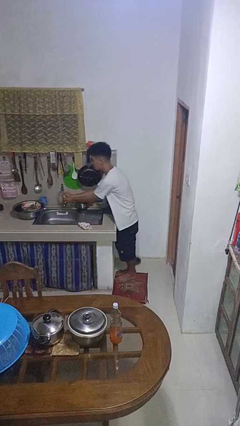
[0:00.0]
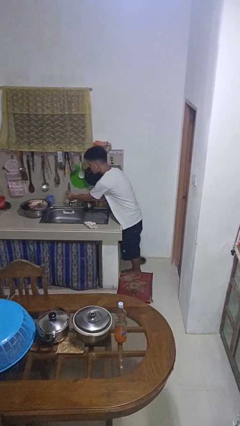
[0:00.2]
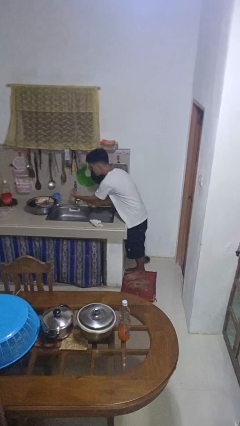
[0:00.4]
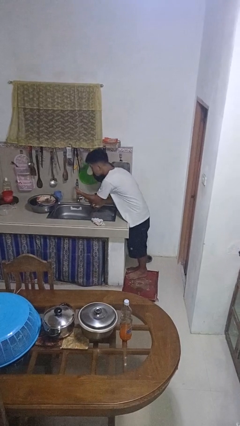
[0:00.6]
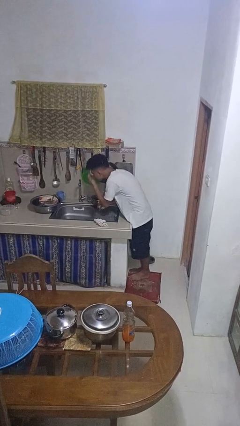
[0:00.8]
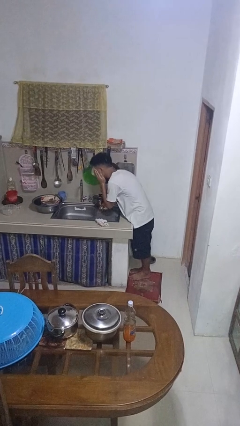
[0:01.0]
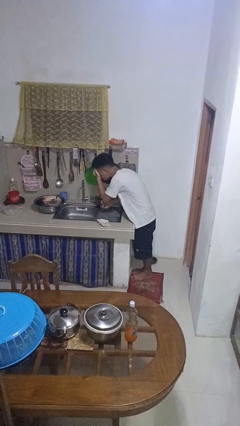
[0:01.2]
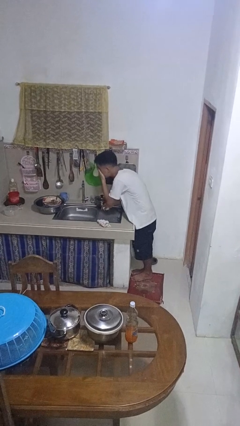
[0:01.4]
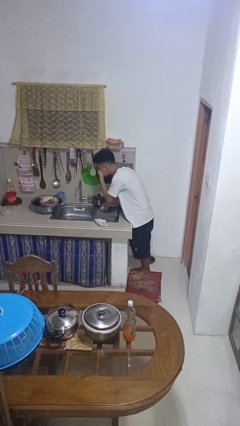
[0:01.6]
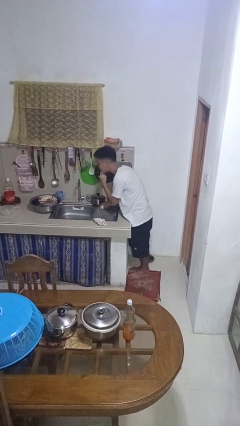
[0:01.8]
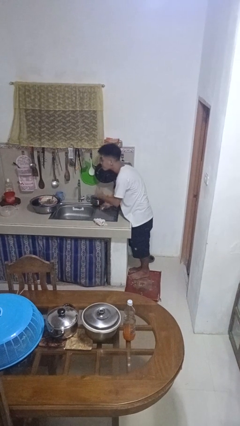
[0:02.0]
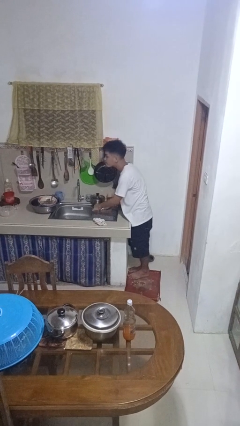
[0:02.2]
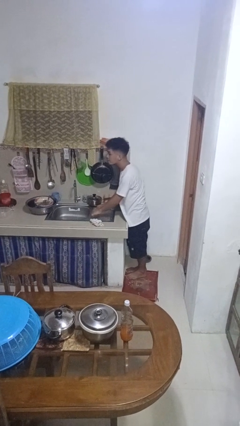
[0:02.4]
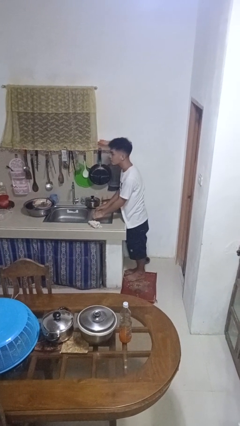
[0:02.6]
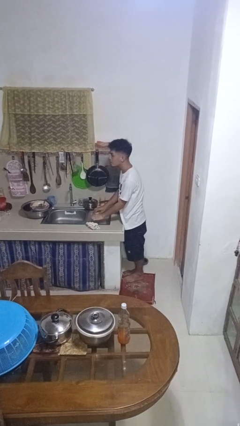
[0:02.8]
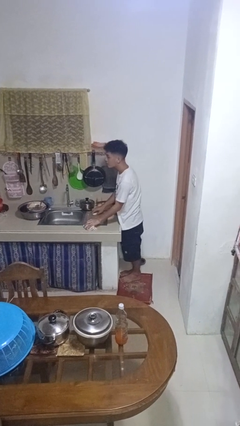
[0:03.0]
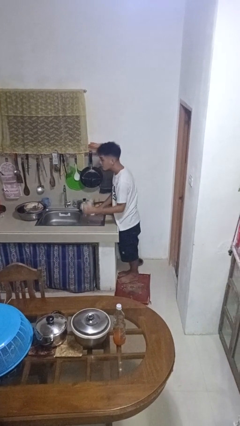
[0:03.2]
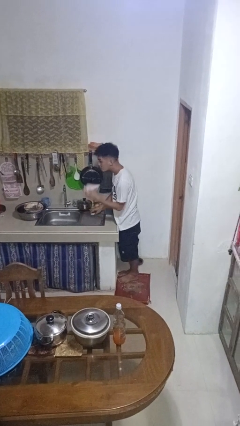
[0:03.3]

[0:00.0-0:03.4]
person washes face

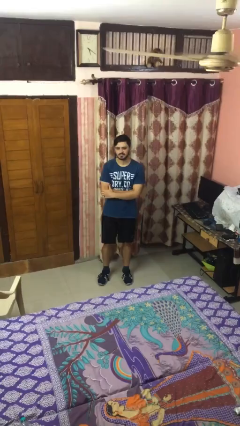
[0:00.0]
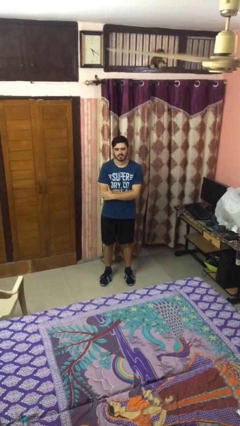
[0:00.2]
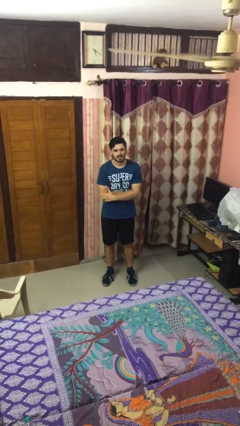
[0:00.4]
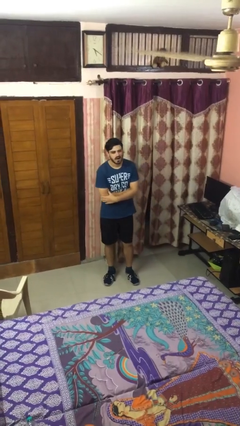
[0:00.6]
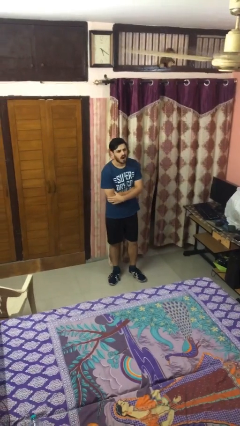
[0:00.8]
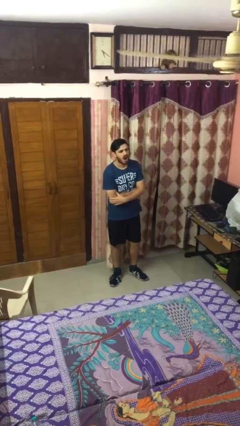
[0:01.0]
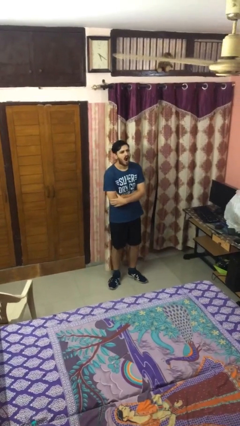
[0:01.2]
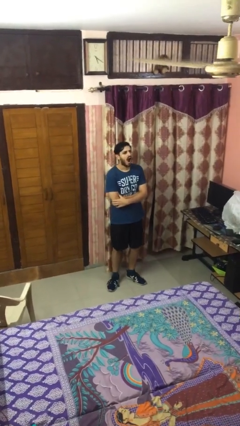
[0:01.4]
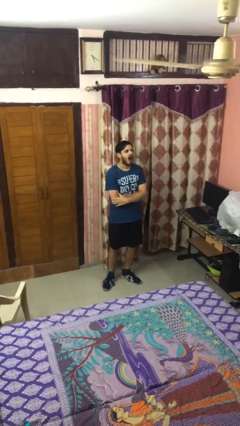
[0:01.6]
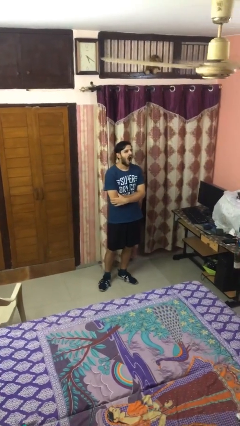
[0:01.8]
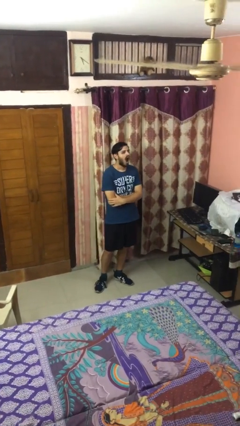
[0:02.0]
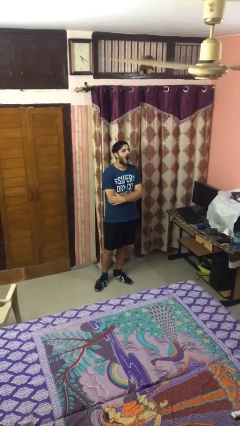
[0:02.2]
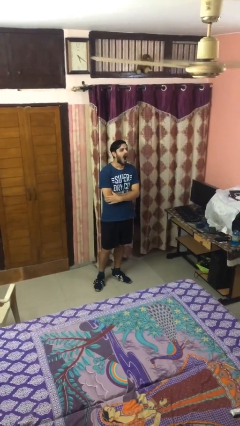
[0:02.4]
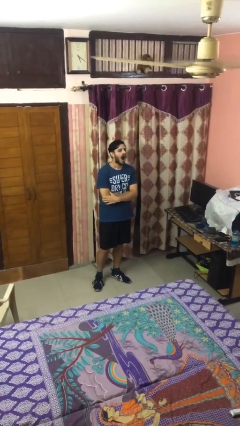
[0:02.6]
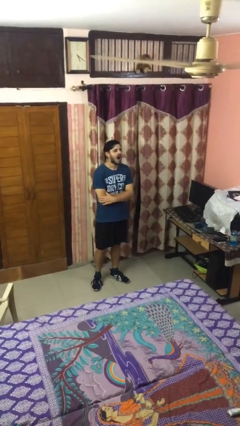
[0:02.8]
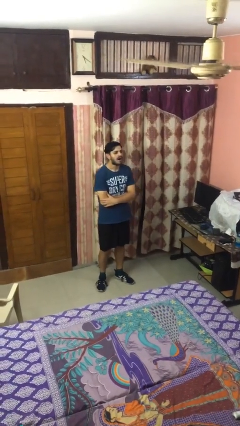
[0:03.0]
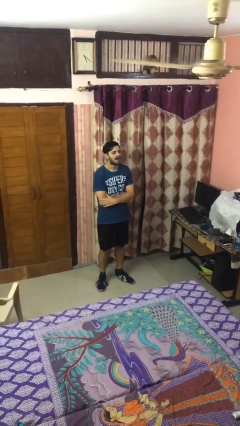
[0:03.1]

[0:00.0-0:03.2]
person yawns

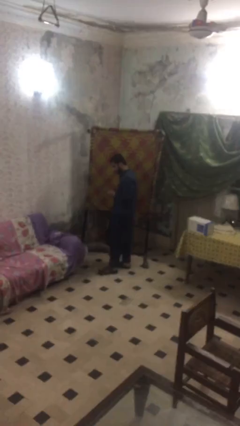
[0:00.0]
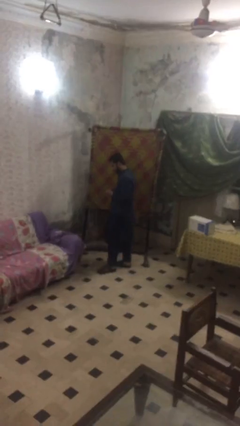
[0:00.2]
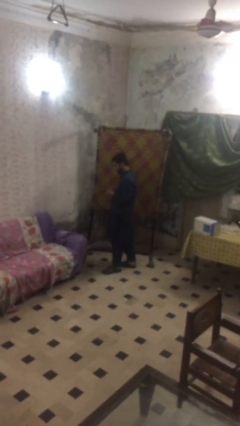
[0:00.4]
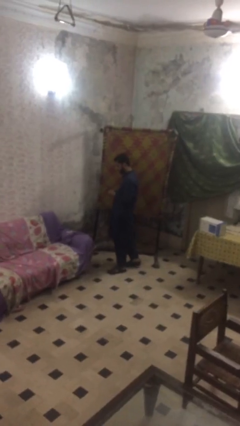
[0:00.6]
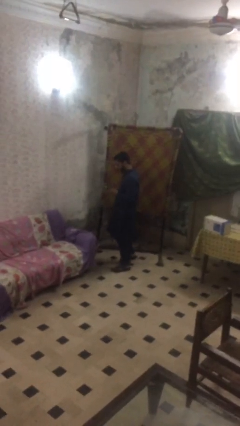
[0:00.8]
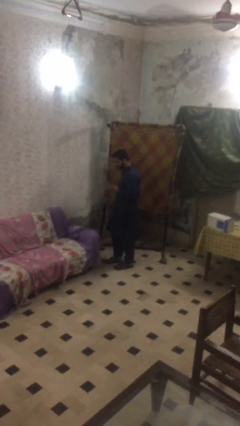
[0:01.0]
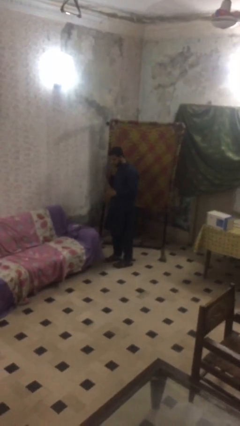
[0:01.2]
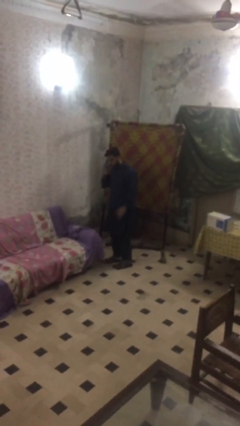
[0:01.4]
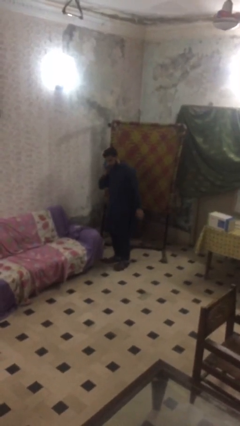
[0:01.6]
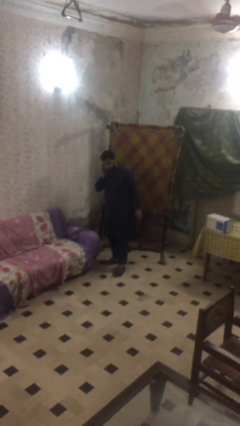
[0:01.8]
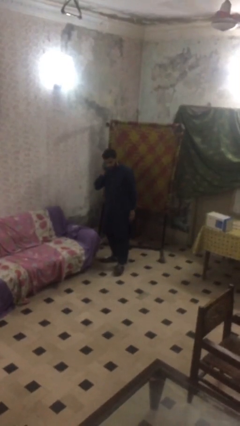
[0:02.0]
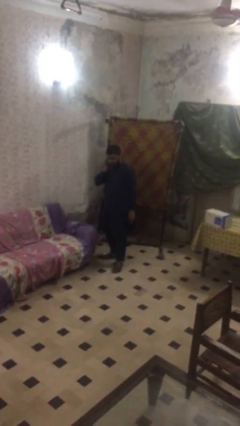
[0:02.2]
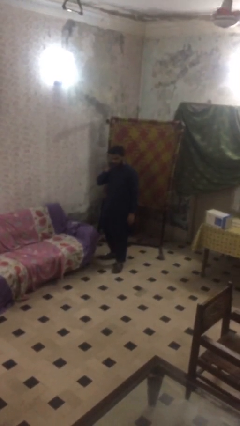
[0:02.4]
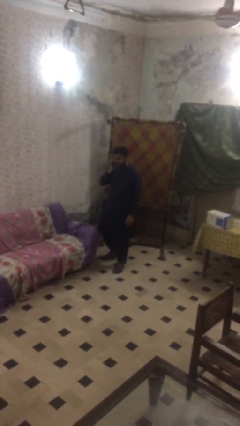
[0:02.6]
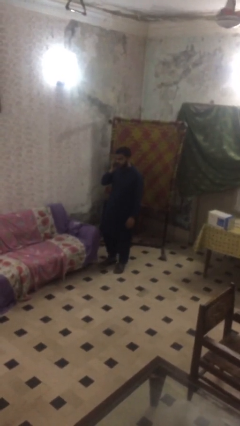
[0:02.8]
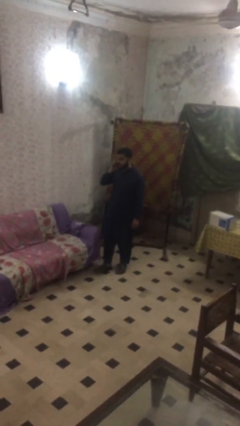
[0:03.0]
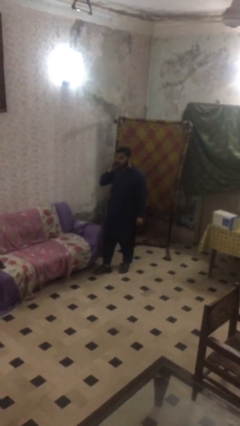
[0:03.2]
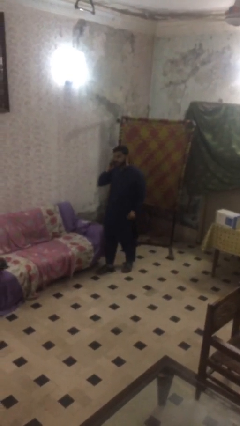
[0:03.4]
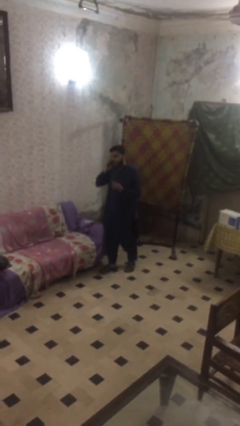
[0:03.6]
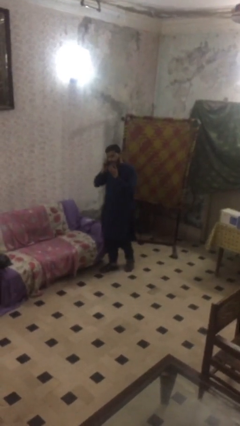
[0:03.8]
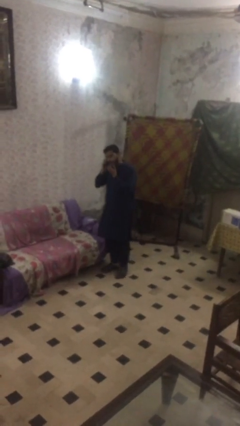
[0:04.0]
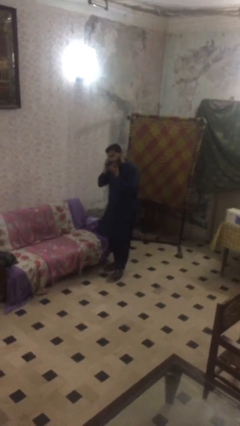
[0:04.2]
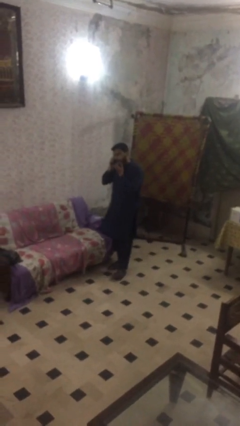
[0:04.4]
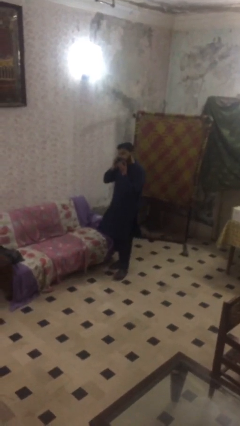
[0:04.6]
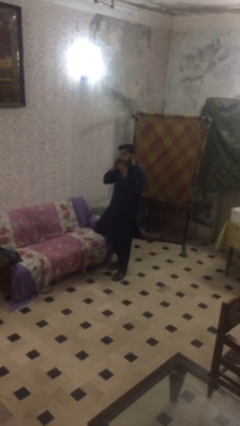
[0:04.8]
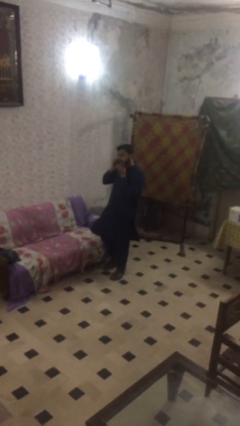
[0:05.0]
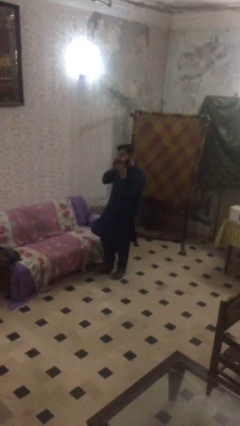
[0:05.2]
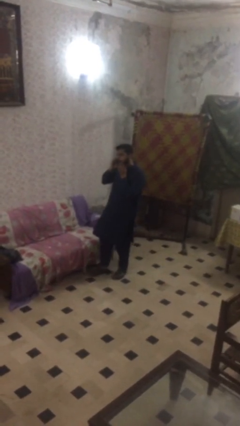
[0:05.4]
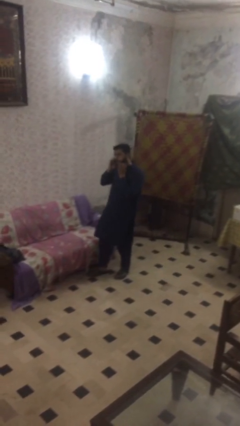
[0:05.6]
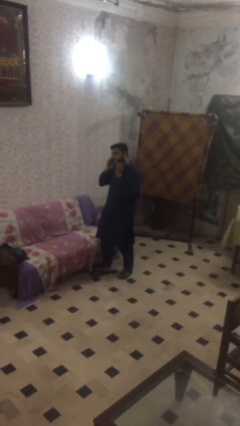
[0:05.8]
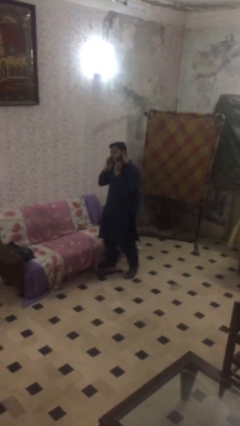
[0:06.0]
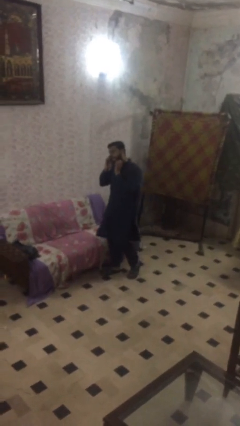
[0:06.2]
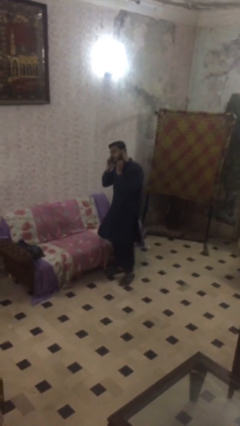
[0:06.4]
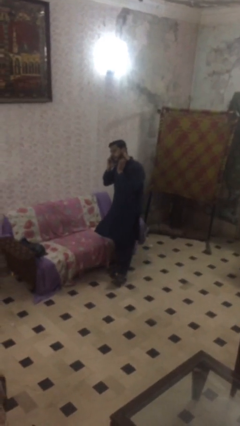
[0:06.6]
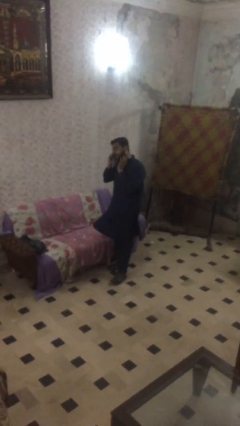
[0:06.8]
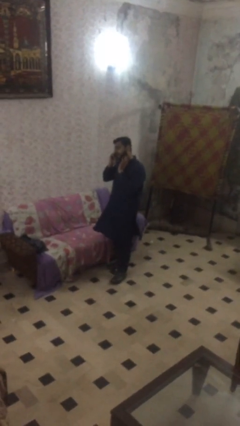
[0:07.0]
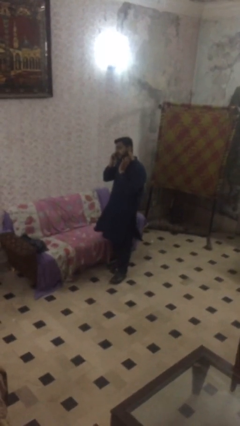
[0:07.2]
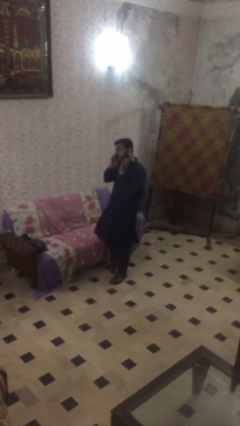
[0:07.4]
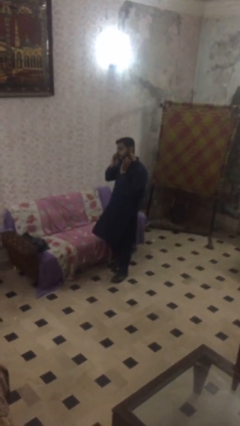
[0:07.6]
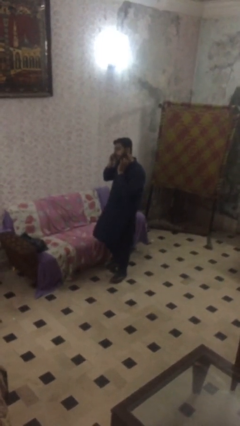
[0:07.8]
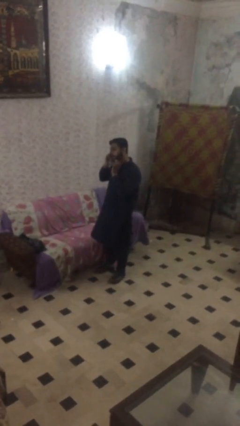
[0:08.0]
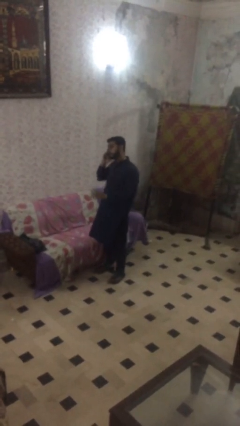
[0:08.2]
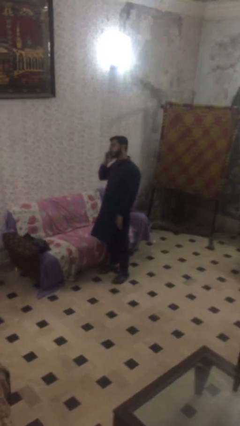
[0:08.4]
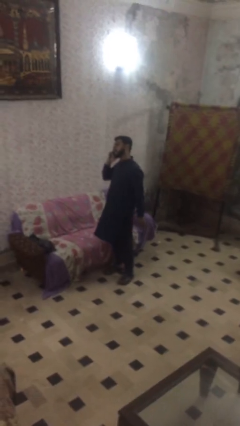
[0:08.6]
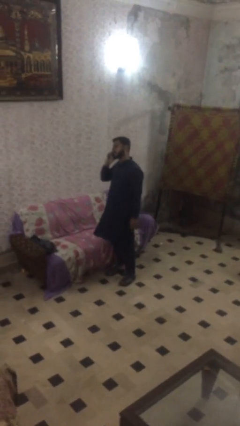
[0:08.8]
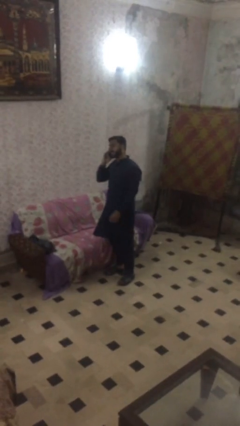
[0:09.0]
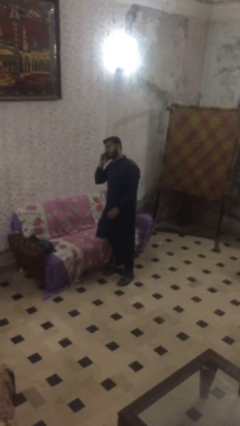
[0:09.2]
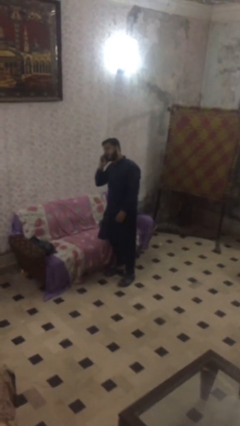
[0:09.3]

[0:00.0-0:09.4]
person talks on phone

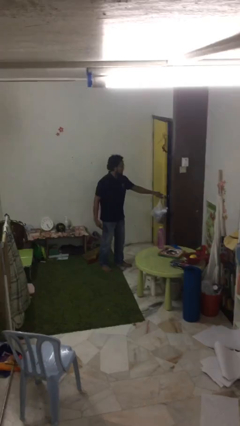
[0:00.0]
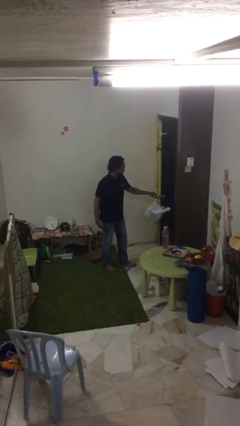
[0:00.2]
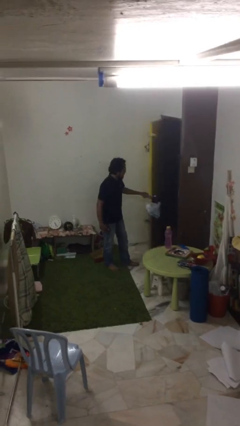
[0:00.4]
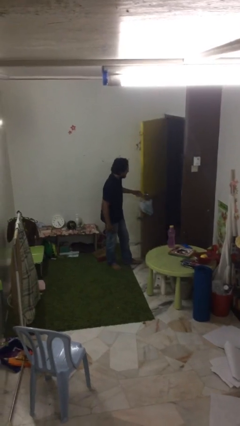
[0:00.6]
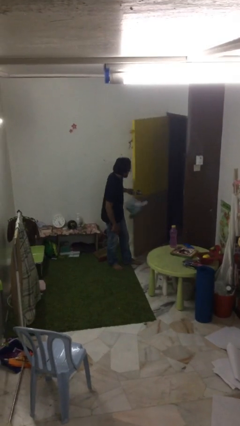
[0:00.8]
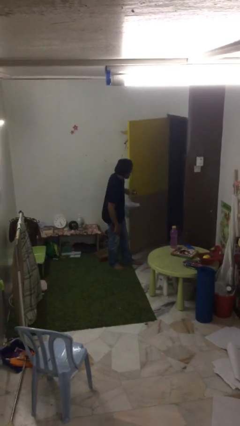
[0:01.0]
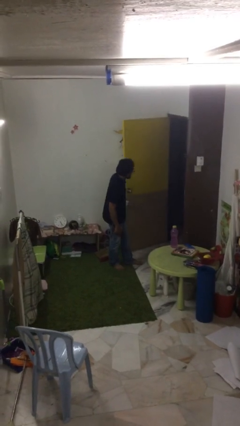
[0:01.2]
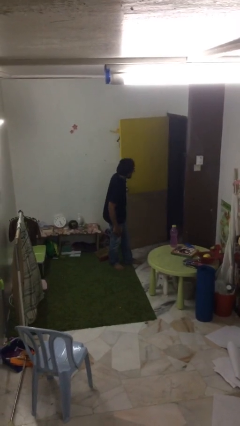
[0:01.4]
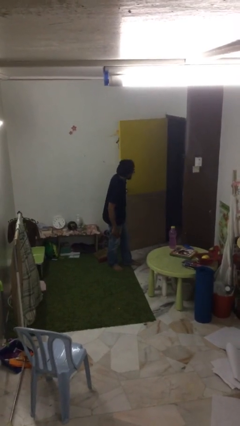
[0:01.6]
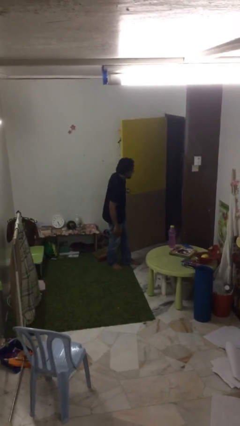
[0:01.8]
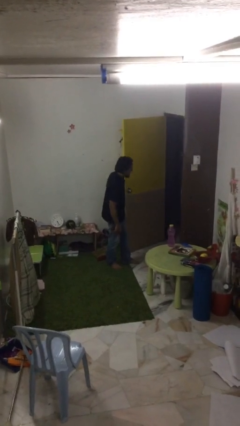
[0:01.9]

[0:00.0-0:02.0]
person opens facility door
